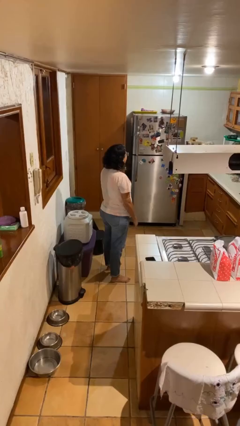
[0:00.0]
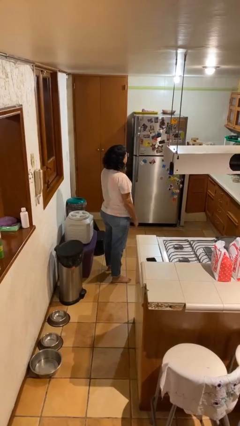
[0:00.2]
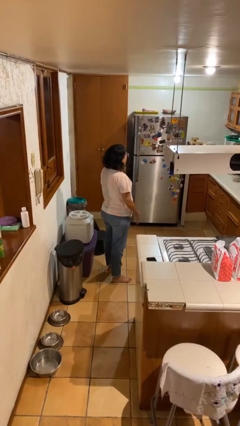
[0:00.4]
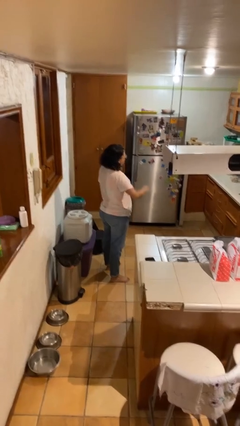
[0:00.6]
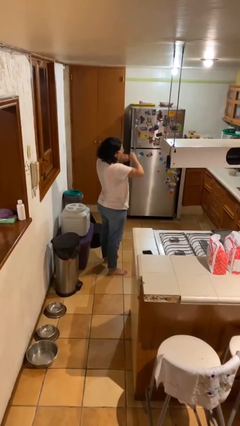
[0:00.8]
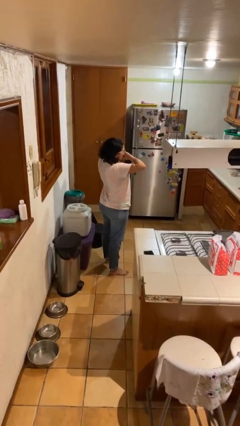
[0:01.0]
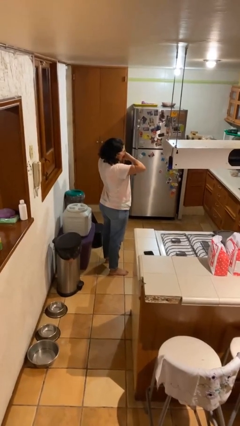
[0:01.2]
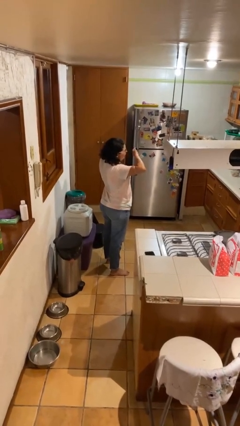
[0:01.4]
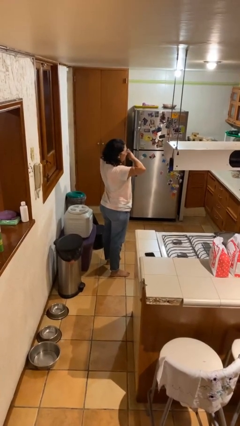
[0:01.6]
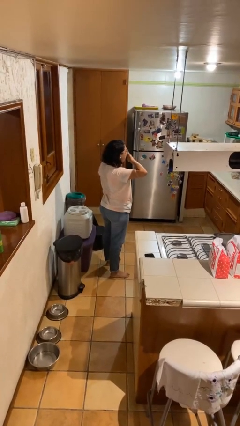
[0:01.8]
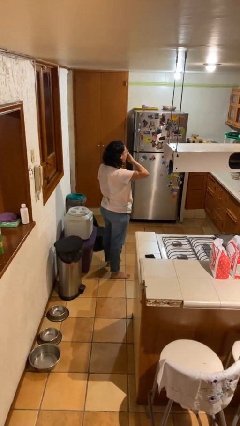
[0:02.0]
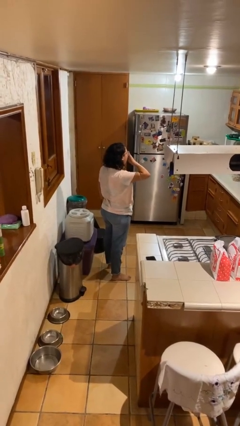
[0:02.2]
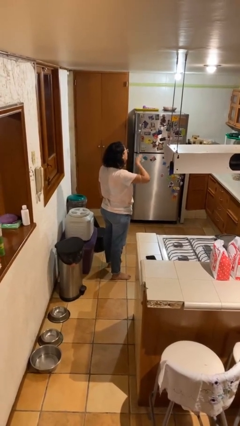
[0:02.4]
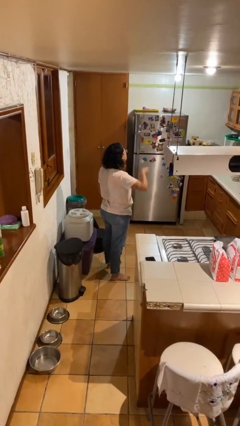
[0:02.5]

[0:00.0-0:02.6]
person yawns

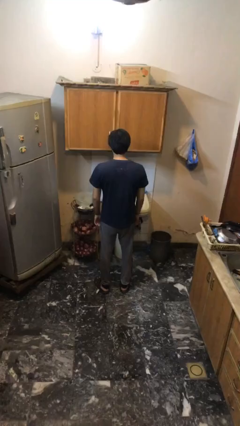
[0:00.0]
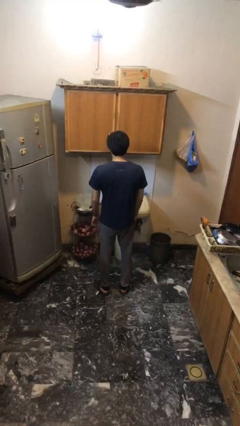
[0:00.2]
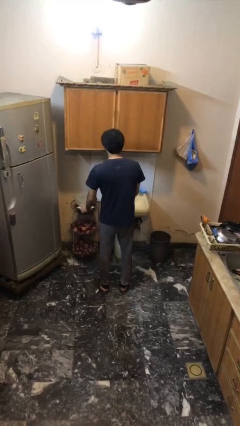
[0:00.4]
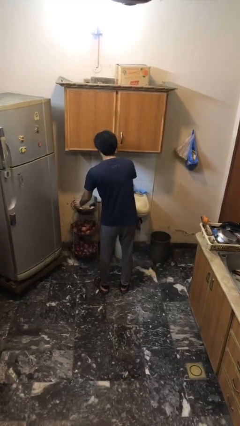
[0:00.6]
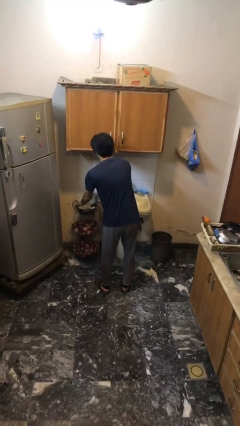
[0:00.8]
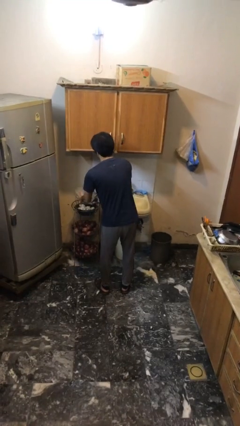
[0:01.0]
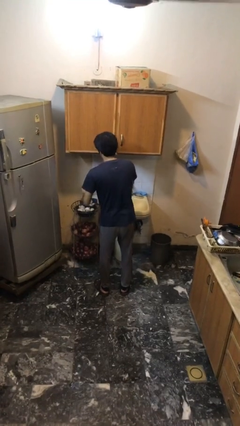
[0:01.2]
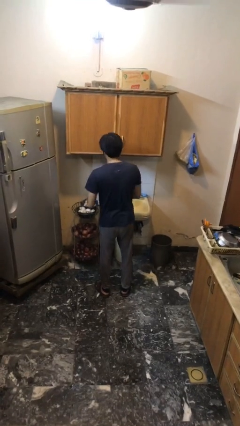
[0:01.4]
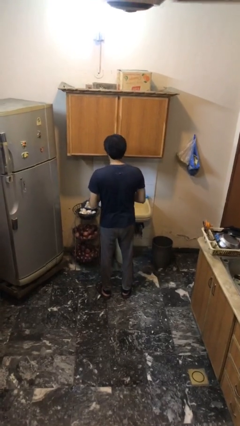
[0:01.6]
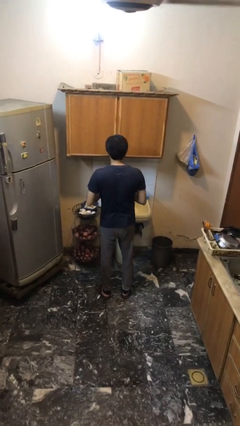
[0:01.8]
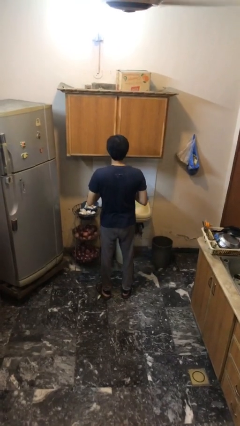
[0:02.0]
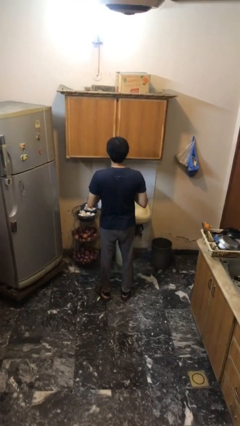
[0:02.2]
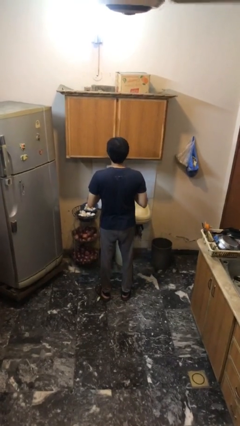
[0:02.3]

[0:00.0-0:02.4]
person picks up object from table

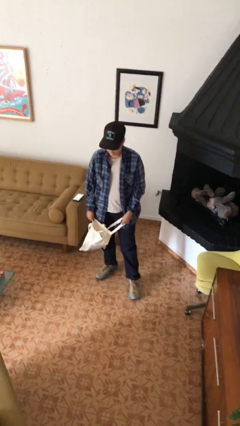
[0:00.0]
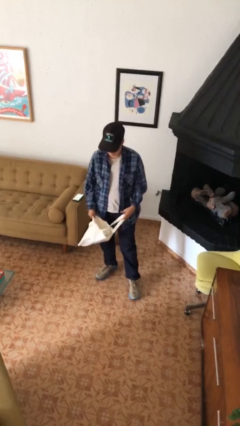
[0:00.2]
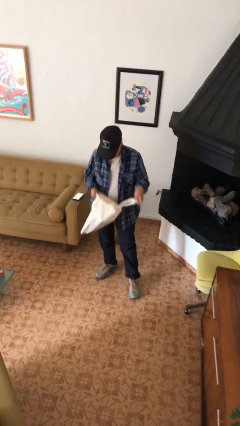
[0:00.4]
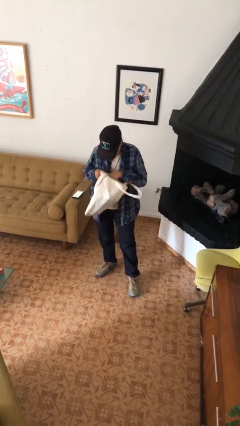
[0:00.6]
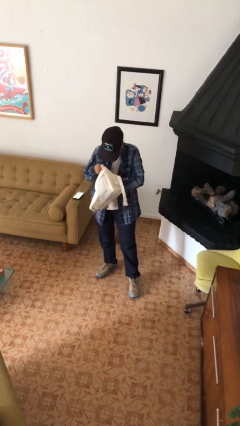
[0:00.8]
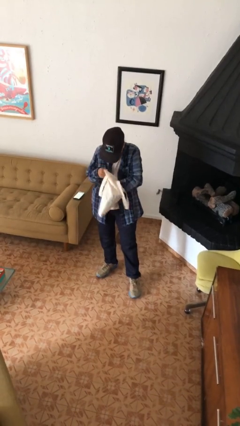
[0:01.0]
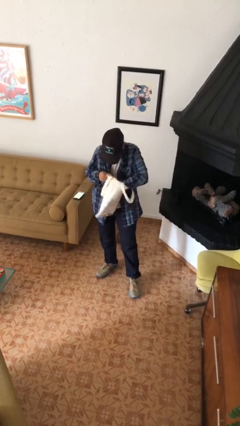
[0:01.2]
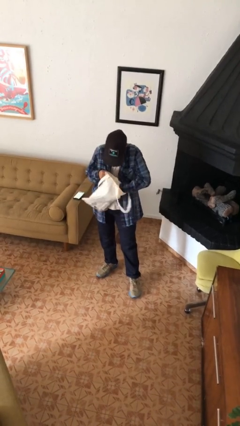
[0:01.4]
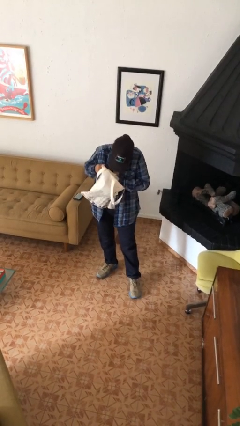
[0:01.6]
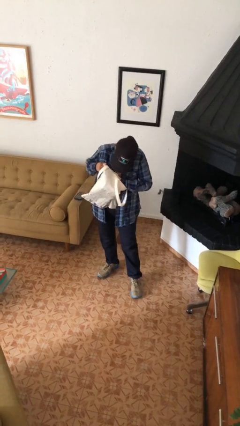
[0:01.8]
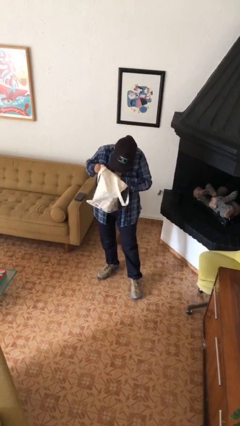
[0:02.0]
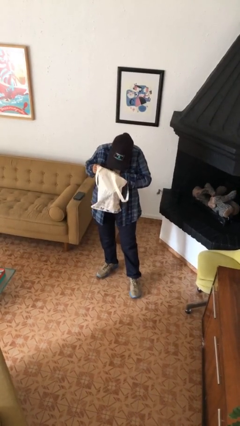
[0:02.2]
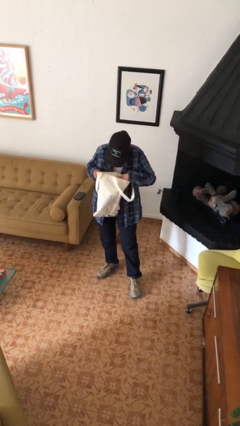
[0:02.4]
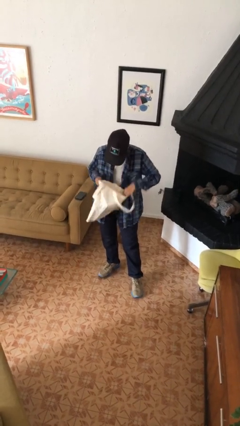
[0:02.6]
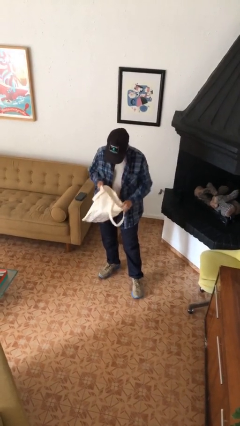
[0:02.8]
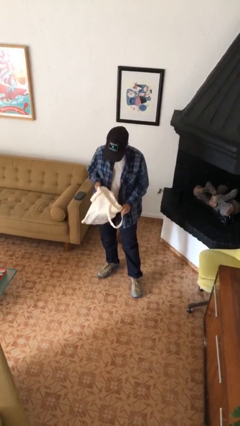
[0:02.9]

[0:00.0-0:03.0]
person searches in bag

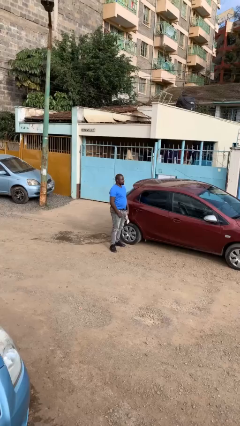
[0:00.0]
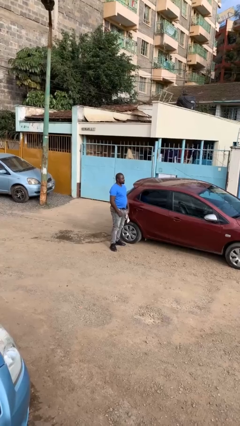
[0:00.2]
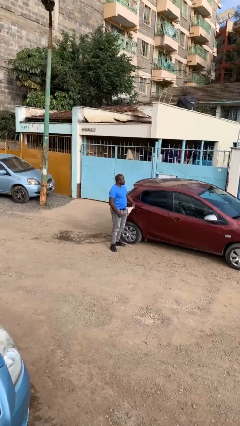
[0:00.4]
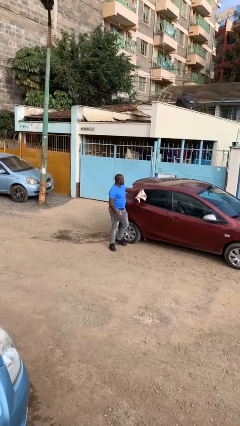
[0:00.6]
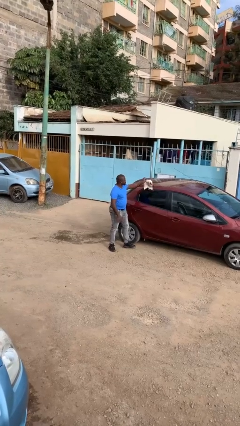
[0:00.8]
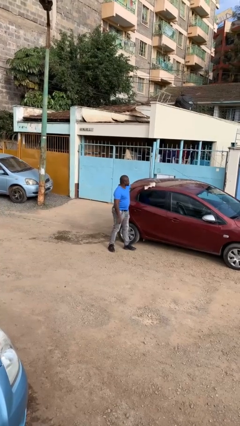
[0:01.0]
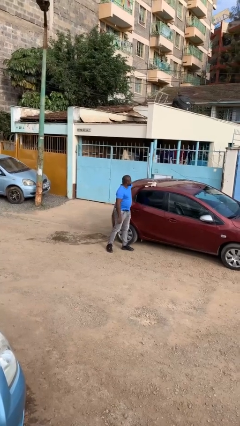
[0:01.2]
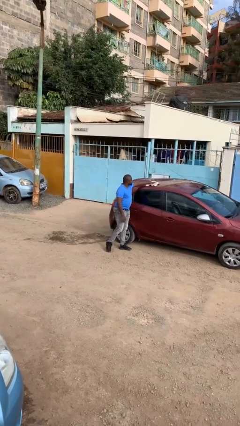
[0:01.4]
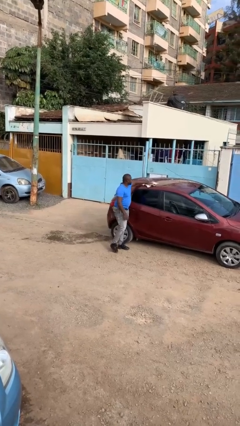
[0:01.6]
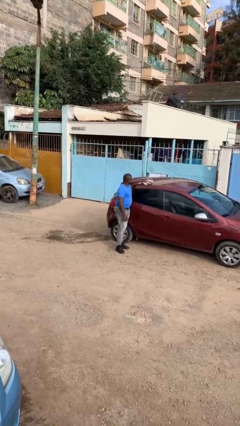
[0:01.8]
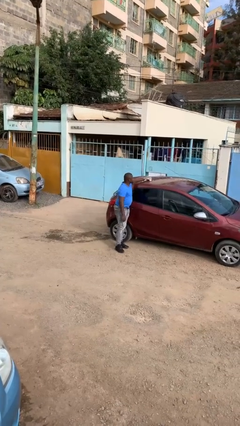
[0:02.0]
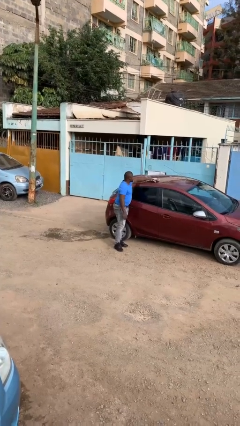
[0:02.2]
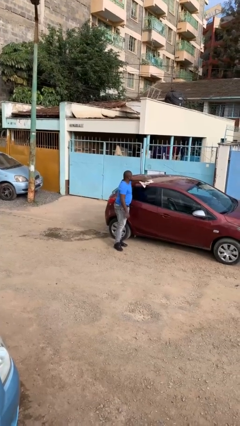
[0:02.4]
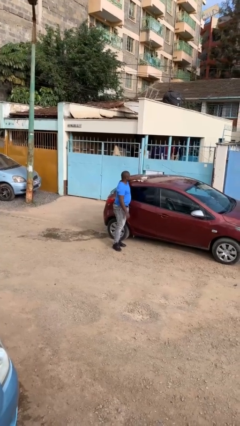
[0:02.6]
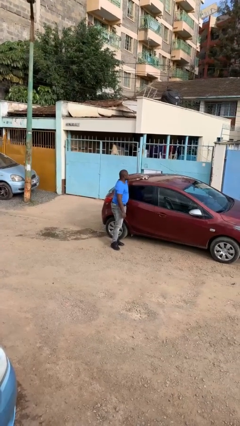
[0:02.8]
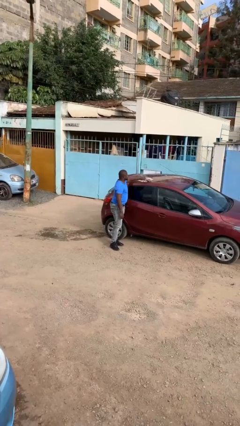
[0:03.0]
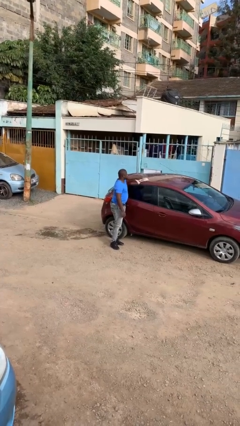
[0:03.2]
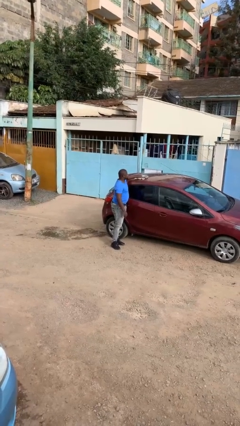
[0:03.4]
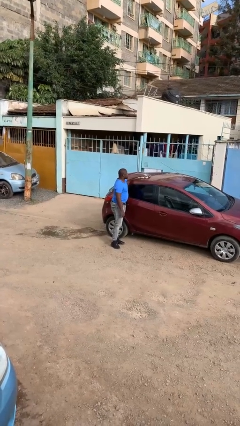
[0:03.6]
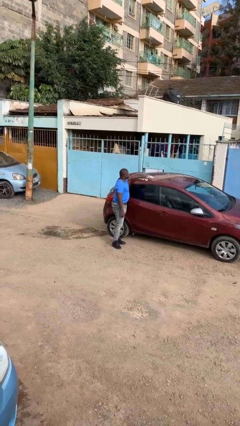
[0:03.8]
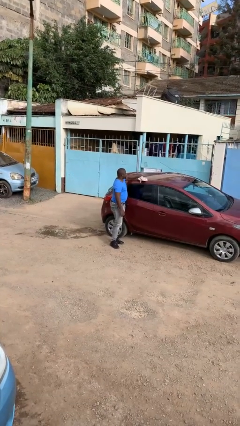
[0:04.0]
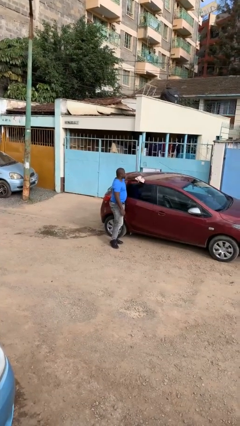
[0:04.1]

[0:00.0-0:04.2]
person polishes car with rag

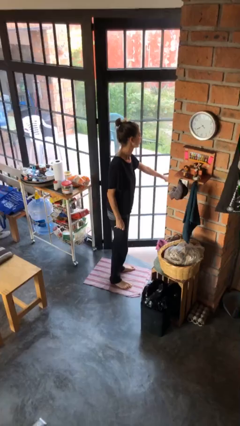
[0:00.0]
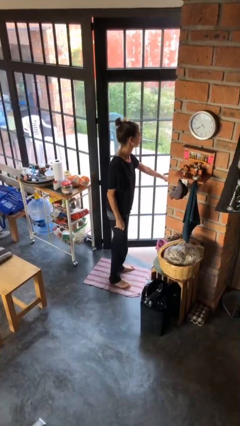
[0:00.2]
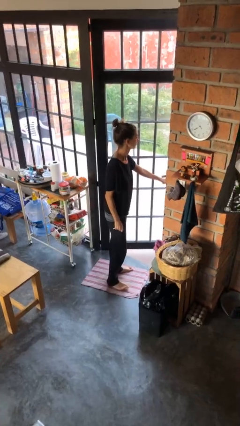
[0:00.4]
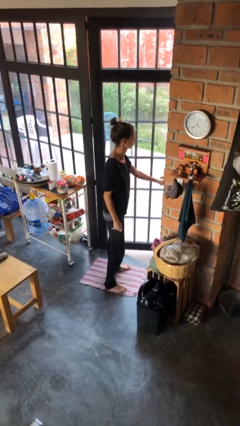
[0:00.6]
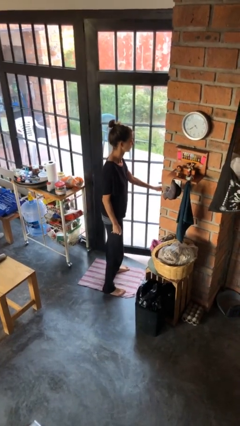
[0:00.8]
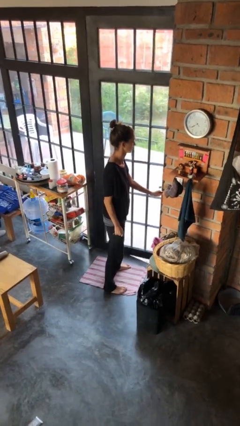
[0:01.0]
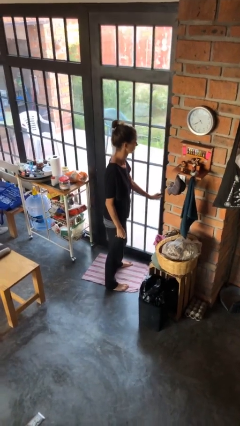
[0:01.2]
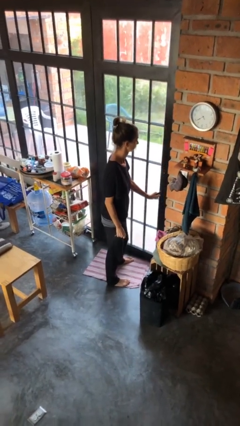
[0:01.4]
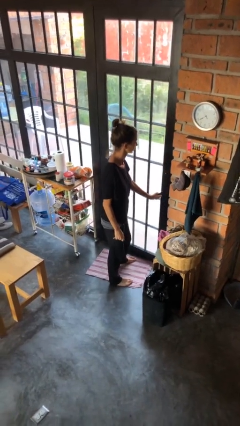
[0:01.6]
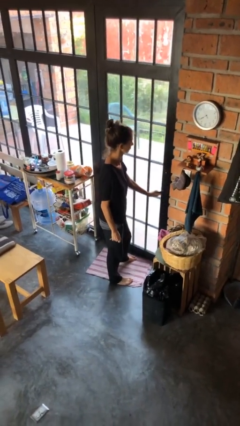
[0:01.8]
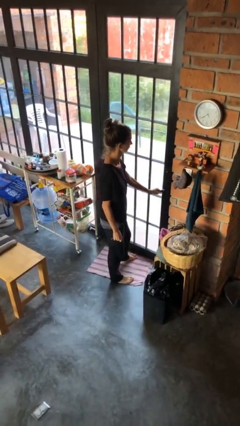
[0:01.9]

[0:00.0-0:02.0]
person closes facility door

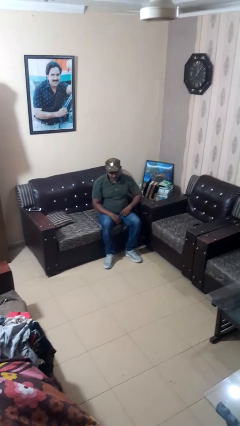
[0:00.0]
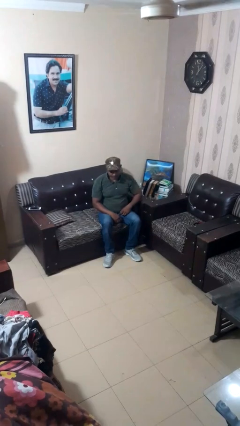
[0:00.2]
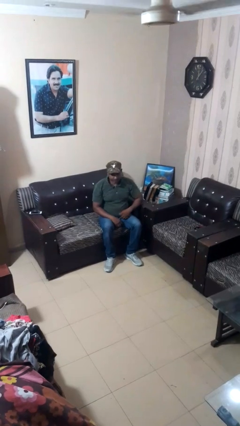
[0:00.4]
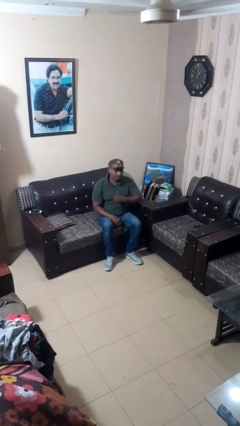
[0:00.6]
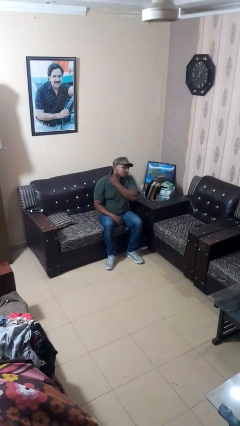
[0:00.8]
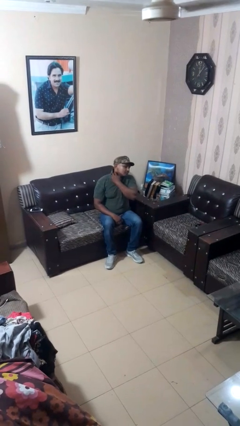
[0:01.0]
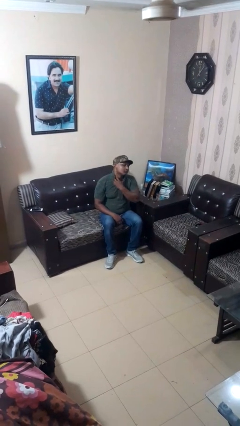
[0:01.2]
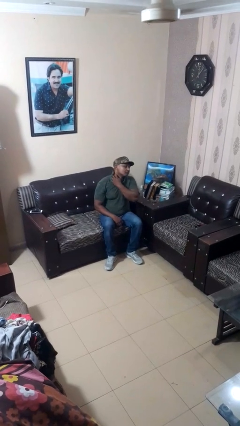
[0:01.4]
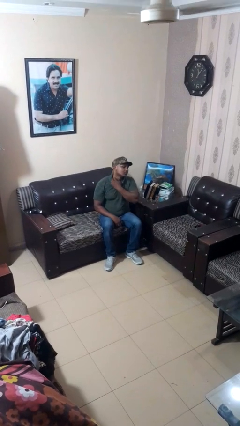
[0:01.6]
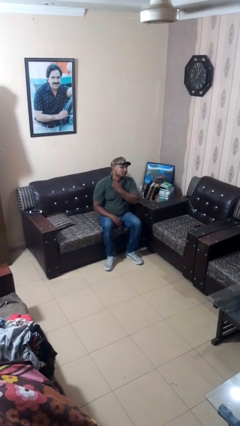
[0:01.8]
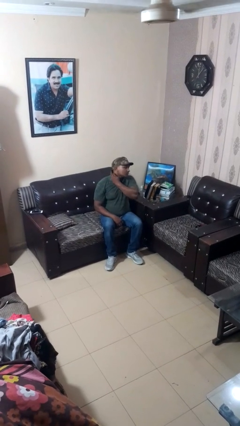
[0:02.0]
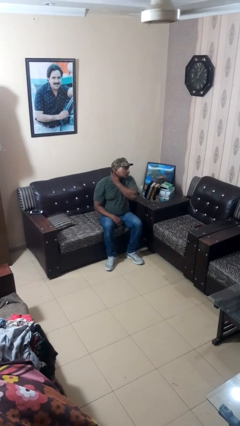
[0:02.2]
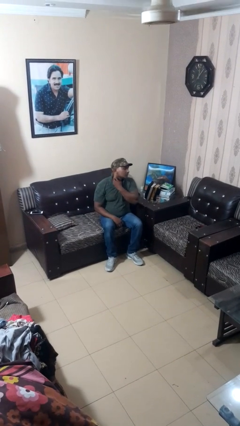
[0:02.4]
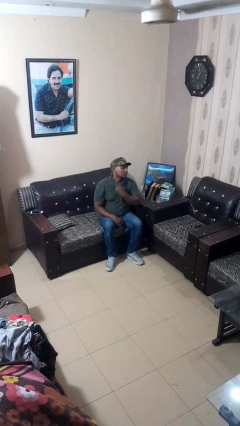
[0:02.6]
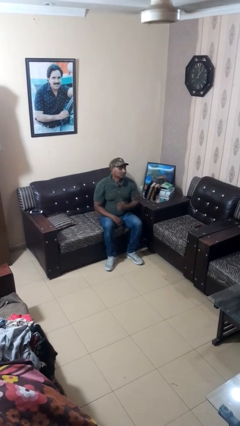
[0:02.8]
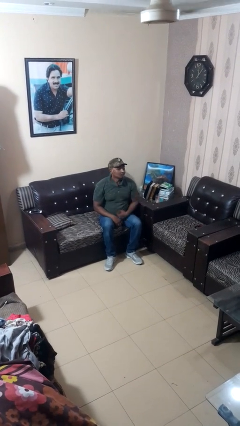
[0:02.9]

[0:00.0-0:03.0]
person rubs neck

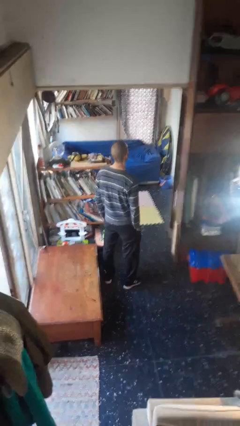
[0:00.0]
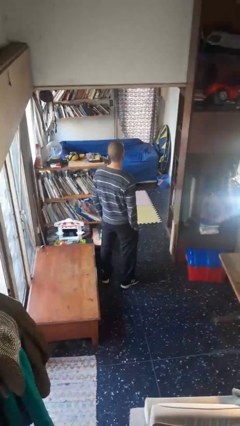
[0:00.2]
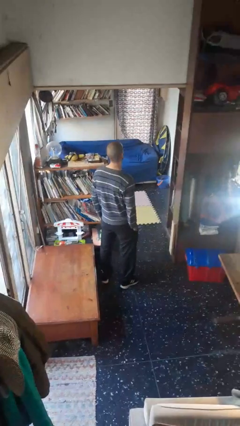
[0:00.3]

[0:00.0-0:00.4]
person puts phone into pocket
